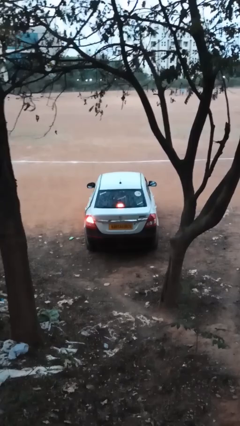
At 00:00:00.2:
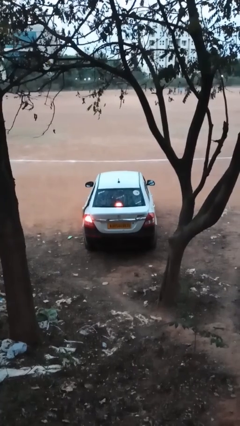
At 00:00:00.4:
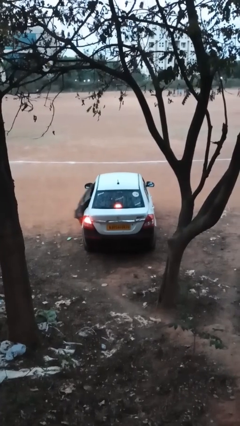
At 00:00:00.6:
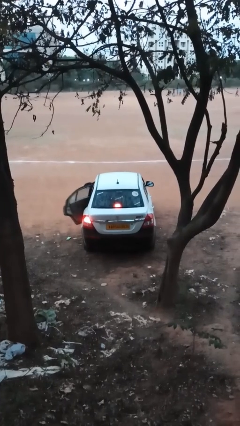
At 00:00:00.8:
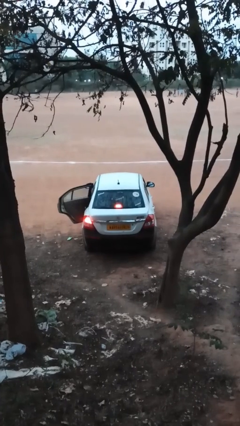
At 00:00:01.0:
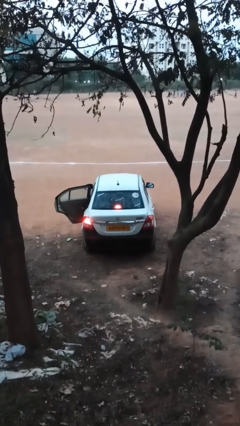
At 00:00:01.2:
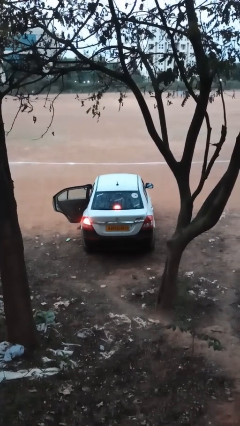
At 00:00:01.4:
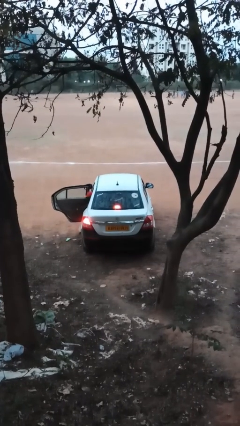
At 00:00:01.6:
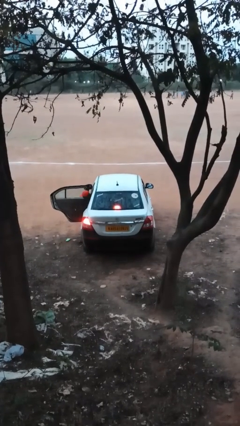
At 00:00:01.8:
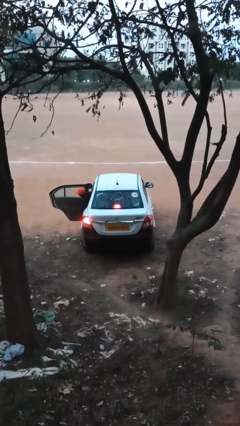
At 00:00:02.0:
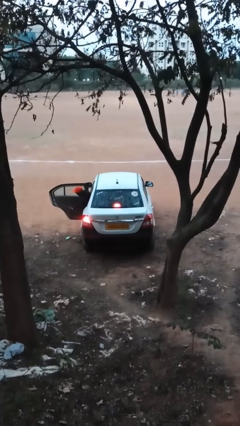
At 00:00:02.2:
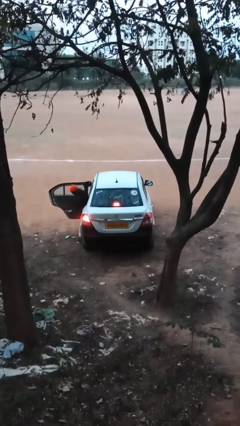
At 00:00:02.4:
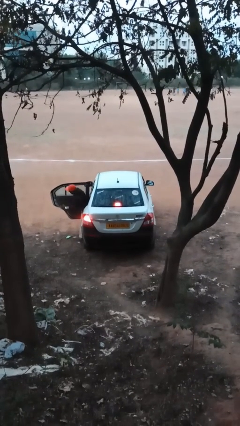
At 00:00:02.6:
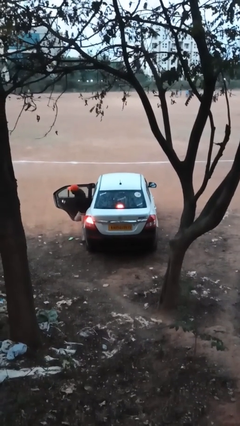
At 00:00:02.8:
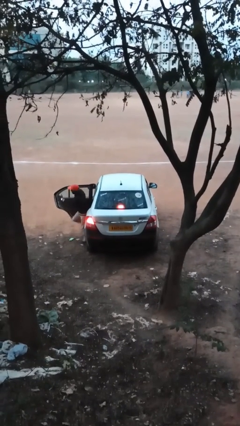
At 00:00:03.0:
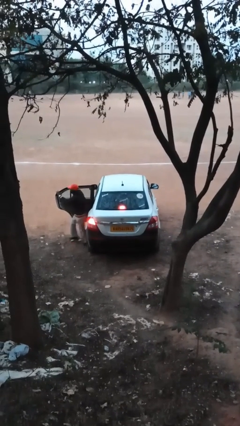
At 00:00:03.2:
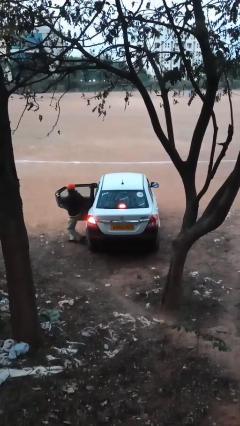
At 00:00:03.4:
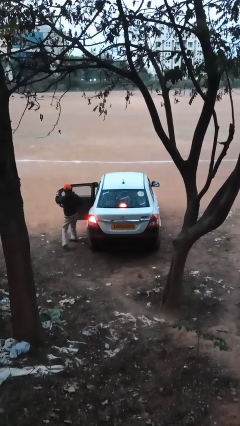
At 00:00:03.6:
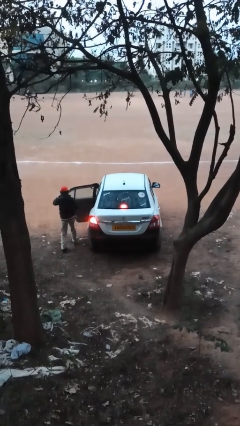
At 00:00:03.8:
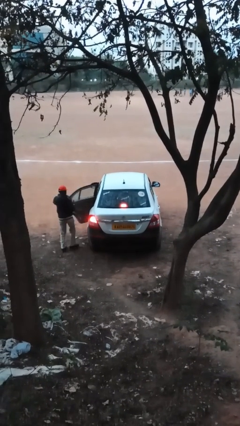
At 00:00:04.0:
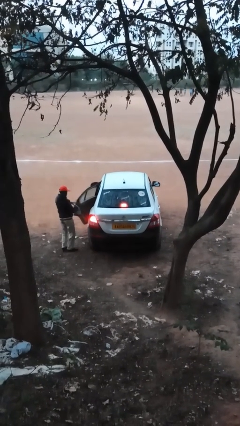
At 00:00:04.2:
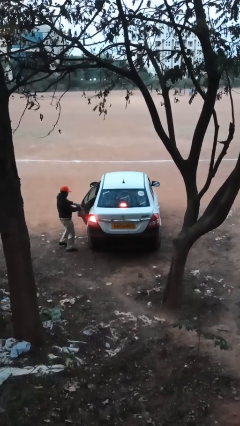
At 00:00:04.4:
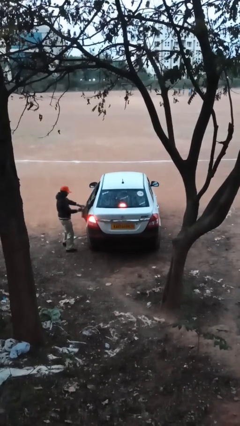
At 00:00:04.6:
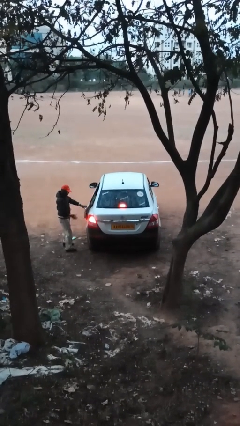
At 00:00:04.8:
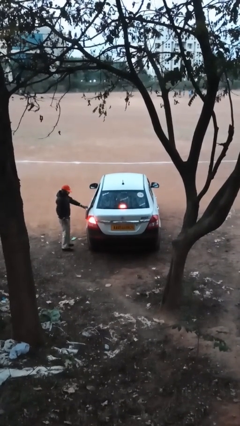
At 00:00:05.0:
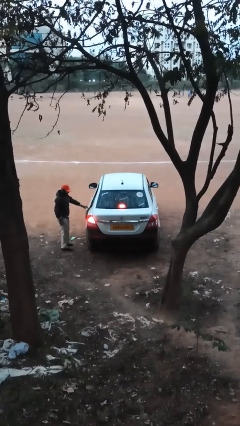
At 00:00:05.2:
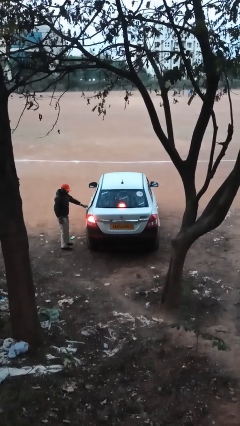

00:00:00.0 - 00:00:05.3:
car drops off person

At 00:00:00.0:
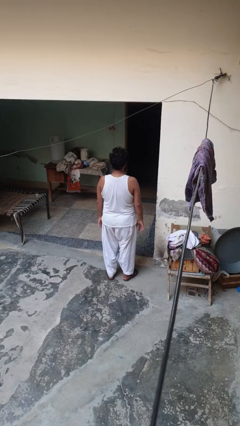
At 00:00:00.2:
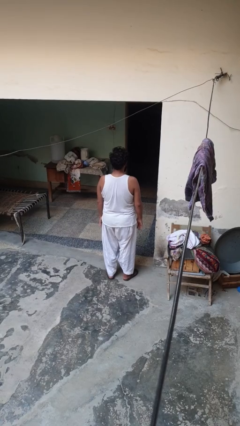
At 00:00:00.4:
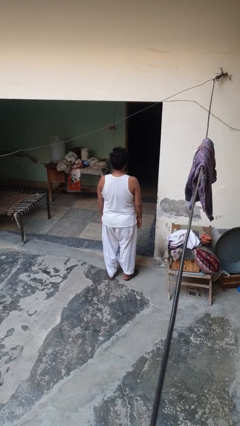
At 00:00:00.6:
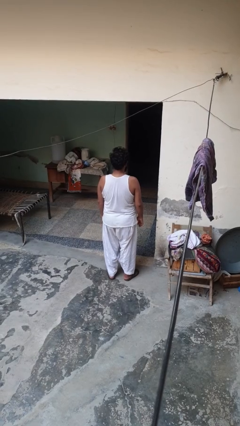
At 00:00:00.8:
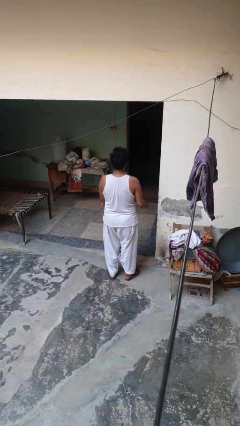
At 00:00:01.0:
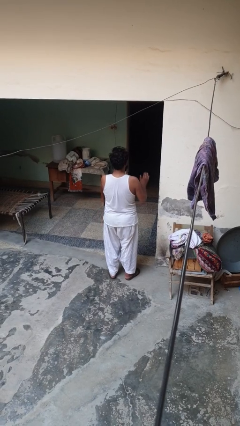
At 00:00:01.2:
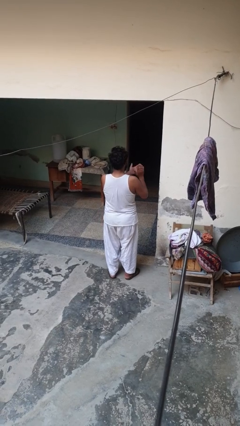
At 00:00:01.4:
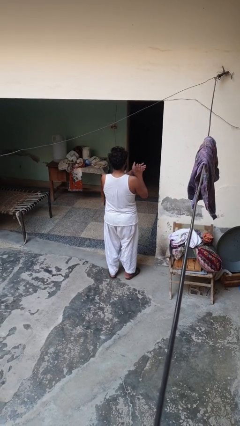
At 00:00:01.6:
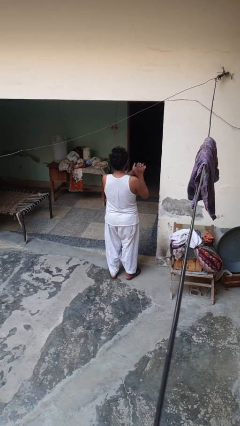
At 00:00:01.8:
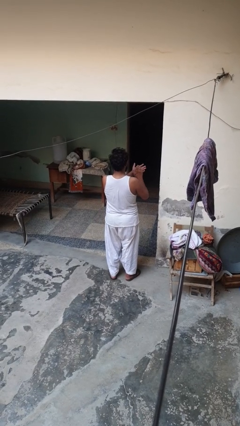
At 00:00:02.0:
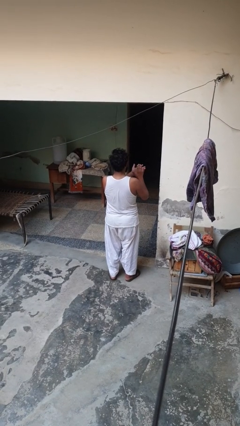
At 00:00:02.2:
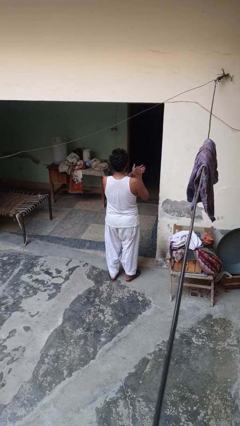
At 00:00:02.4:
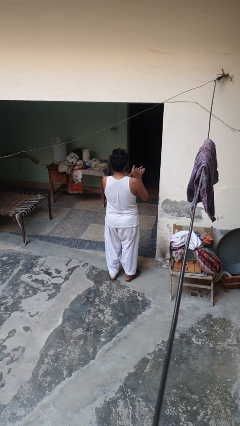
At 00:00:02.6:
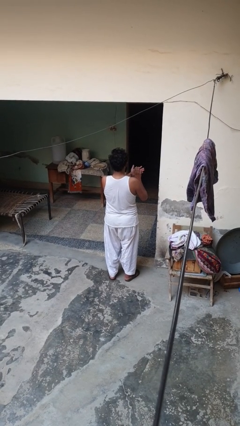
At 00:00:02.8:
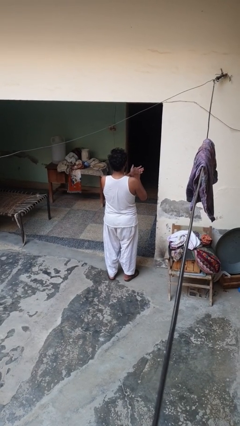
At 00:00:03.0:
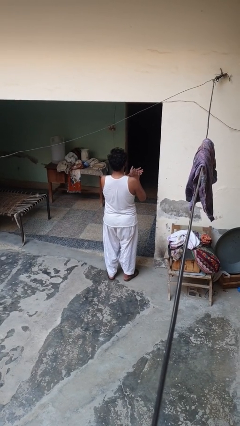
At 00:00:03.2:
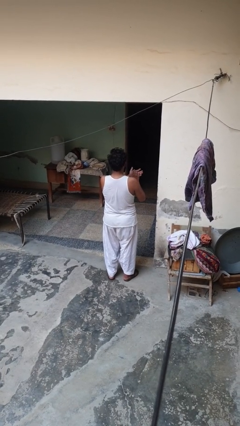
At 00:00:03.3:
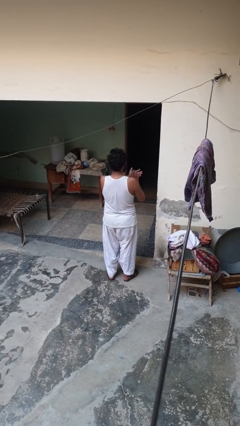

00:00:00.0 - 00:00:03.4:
person claps hands

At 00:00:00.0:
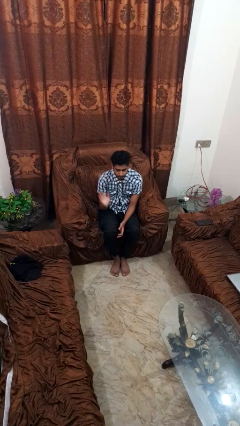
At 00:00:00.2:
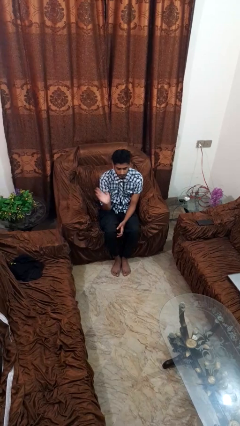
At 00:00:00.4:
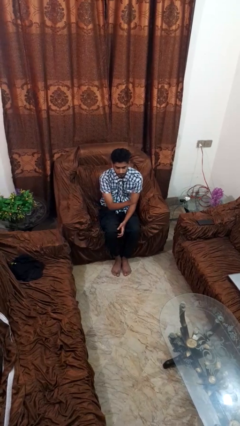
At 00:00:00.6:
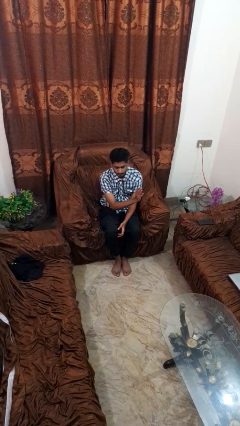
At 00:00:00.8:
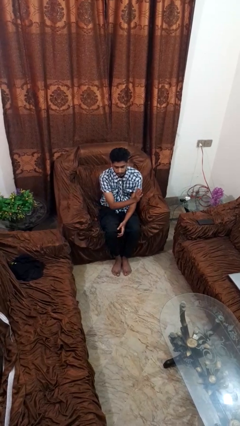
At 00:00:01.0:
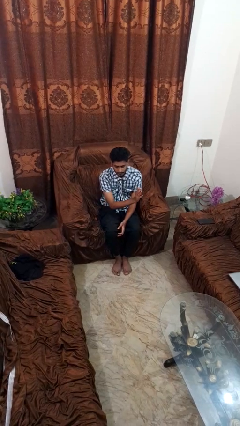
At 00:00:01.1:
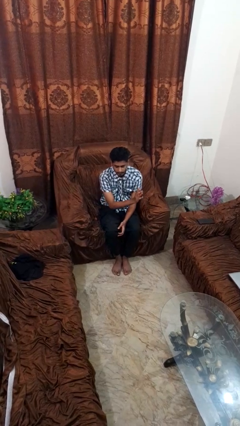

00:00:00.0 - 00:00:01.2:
person gestures swipe left

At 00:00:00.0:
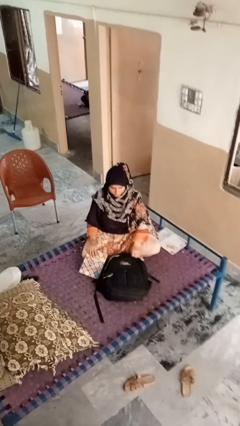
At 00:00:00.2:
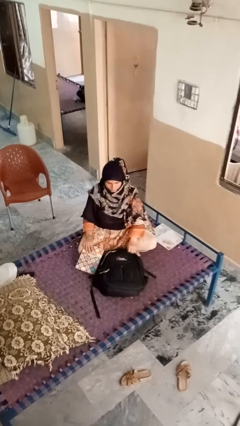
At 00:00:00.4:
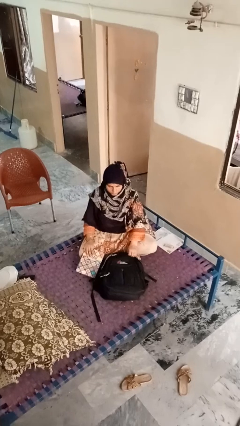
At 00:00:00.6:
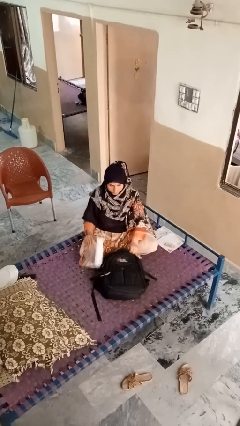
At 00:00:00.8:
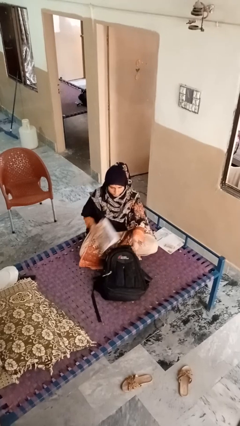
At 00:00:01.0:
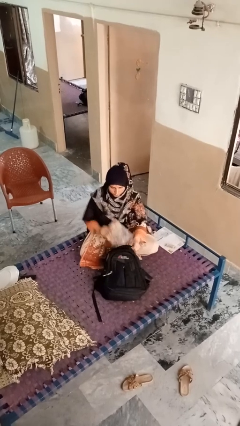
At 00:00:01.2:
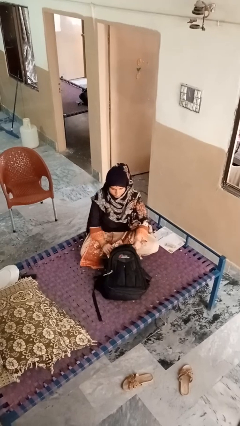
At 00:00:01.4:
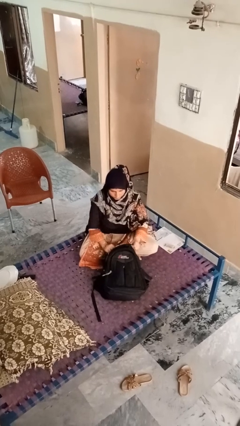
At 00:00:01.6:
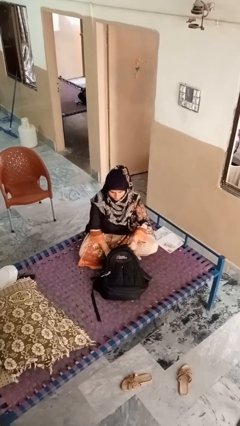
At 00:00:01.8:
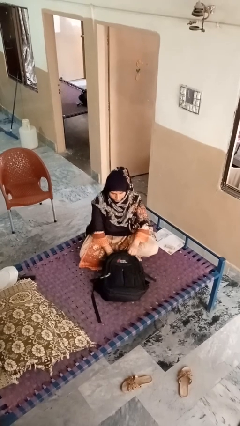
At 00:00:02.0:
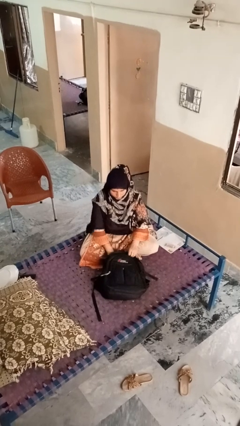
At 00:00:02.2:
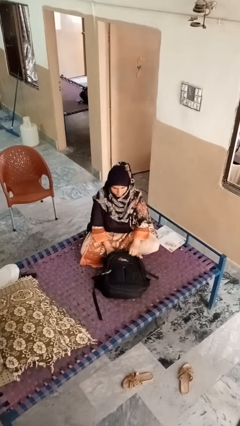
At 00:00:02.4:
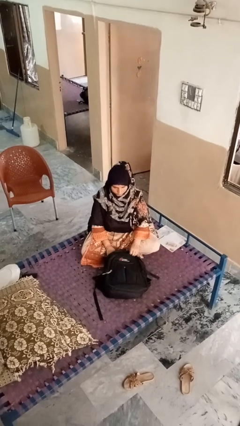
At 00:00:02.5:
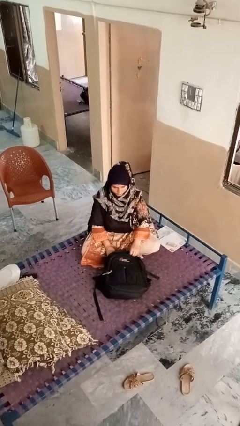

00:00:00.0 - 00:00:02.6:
person puts object into bag

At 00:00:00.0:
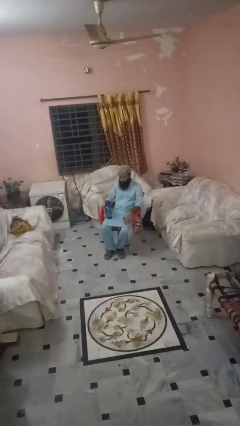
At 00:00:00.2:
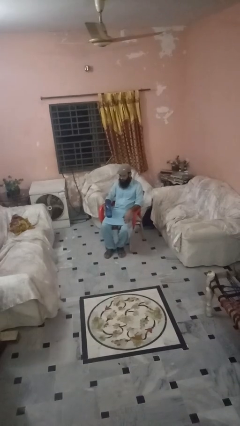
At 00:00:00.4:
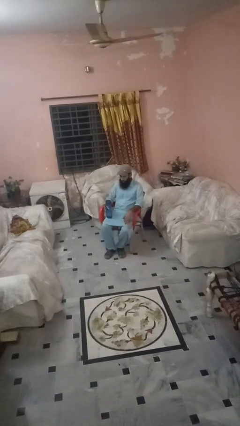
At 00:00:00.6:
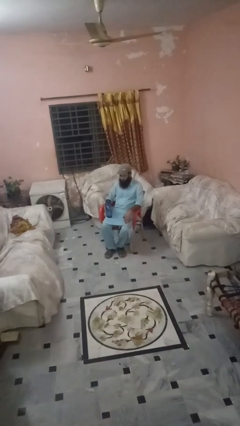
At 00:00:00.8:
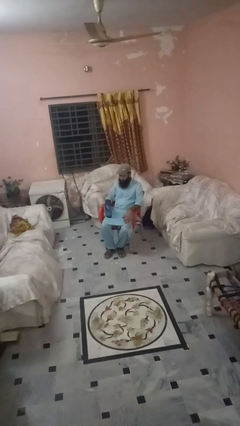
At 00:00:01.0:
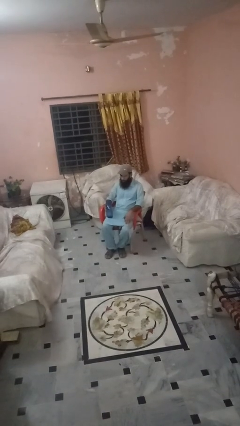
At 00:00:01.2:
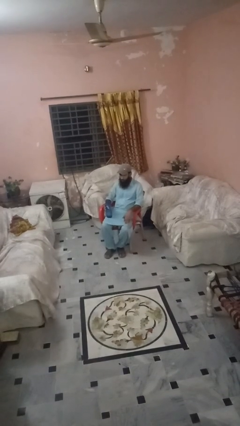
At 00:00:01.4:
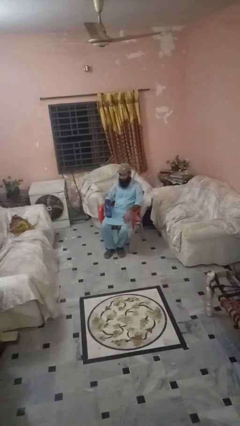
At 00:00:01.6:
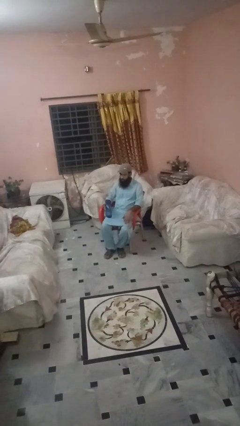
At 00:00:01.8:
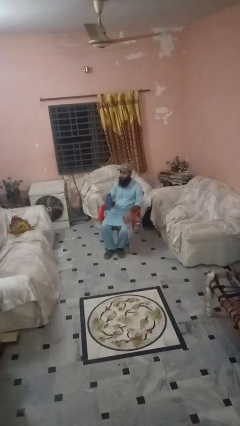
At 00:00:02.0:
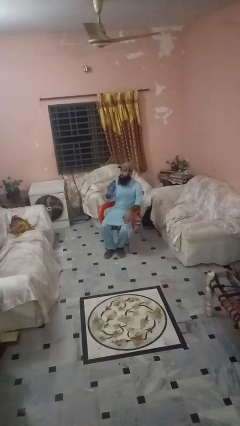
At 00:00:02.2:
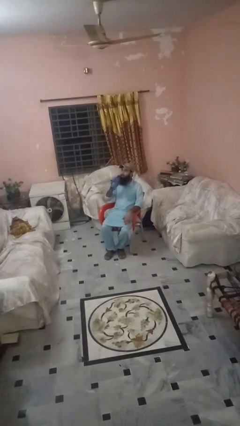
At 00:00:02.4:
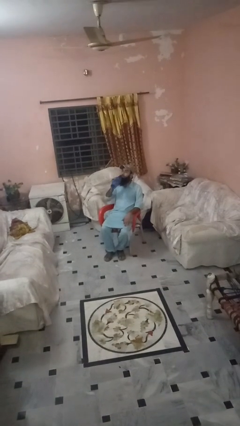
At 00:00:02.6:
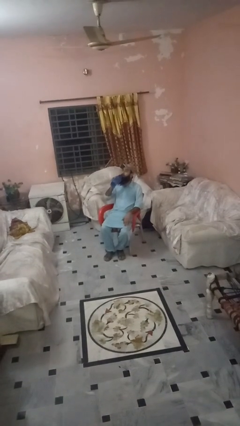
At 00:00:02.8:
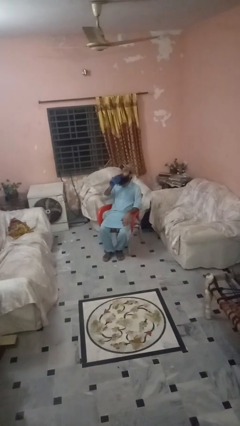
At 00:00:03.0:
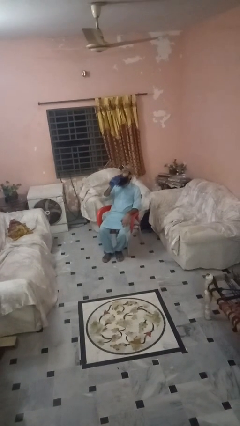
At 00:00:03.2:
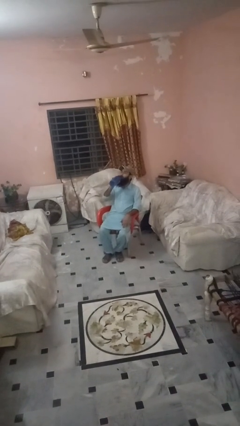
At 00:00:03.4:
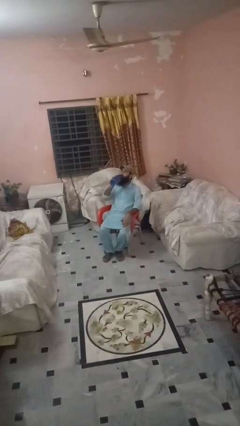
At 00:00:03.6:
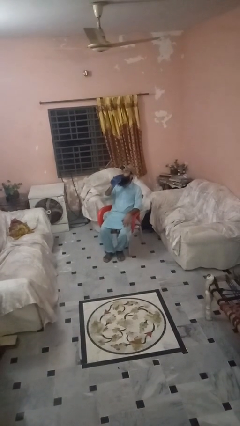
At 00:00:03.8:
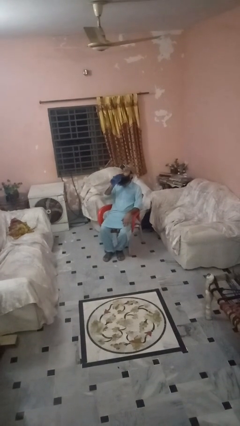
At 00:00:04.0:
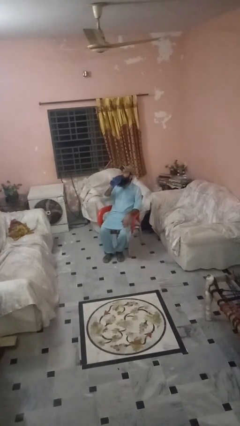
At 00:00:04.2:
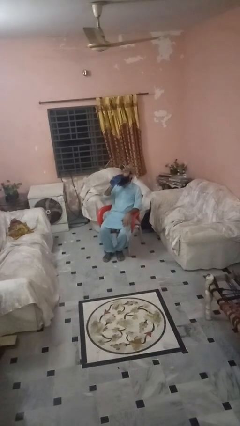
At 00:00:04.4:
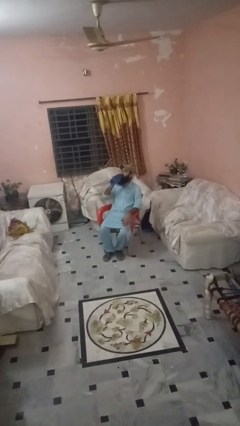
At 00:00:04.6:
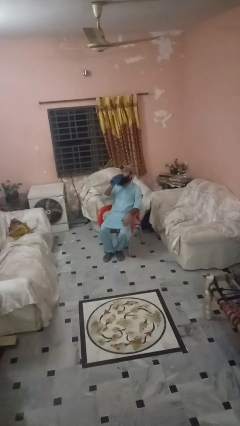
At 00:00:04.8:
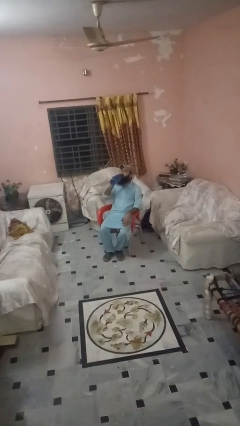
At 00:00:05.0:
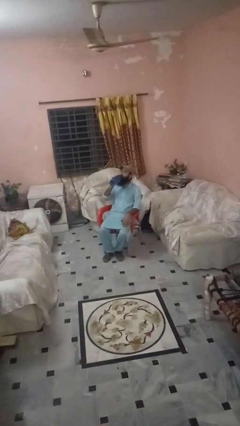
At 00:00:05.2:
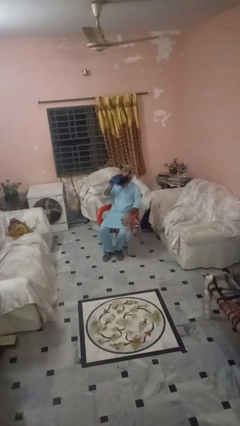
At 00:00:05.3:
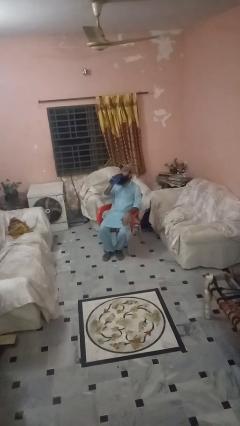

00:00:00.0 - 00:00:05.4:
person drinks from bottle
